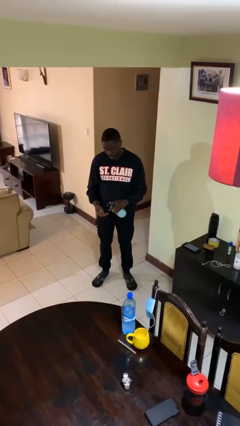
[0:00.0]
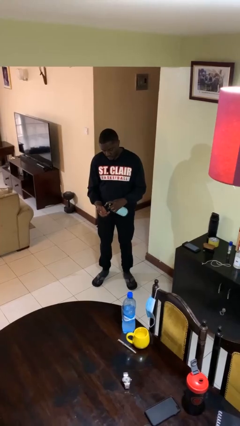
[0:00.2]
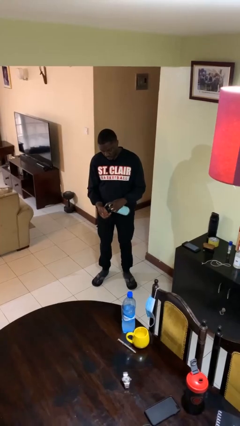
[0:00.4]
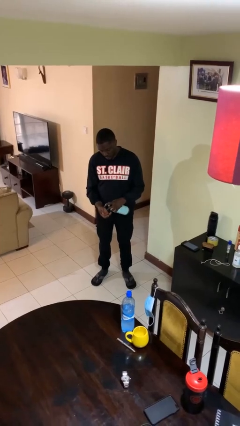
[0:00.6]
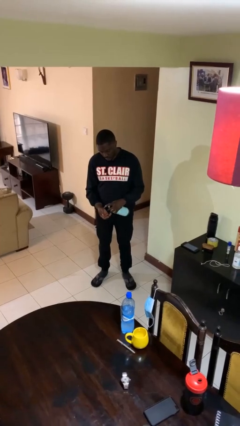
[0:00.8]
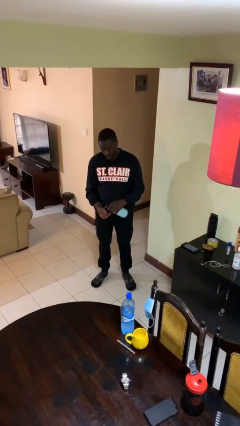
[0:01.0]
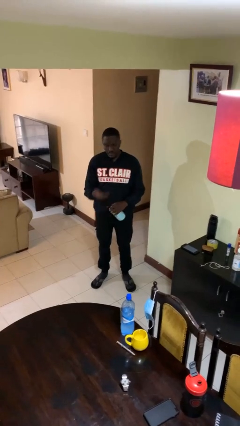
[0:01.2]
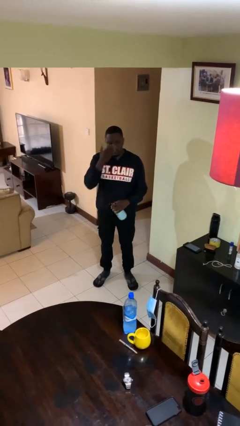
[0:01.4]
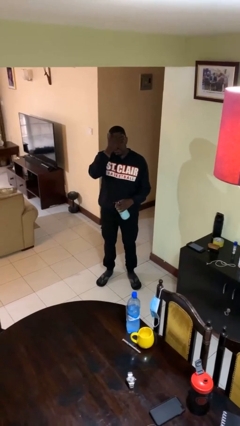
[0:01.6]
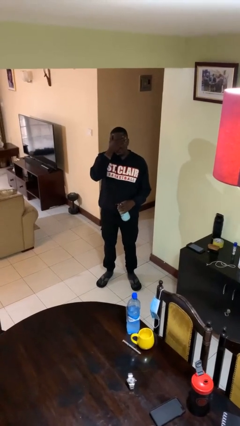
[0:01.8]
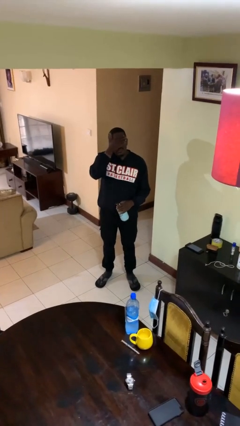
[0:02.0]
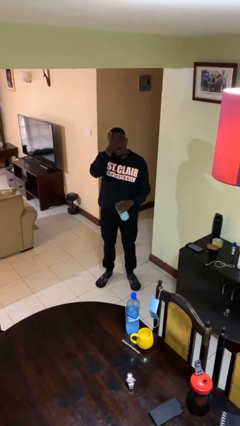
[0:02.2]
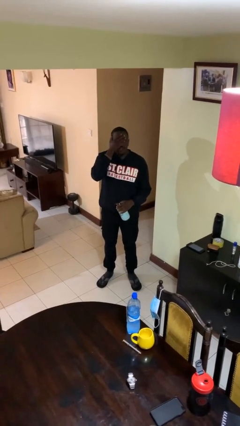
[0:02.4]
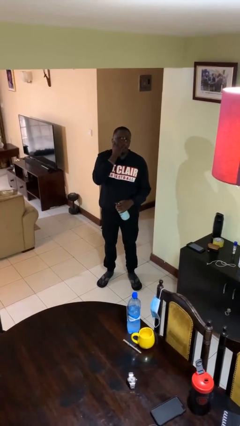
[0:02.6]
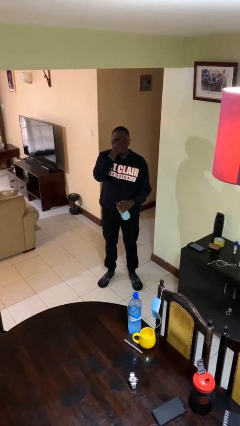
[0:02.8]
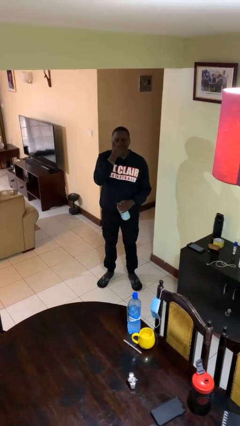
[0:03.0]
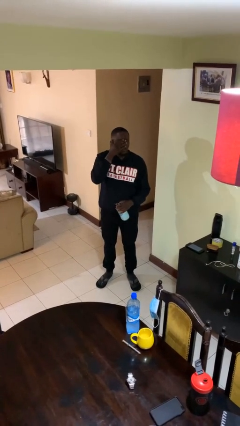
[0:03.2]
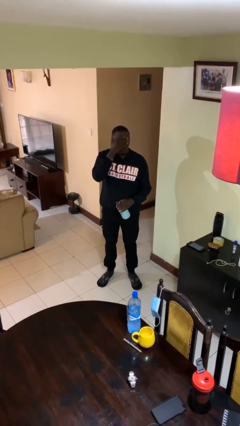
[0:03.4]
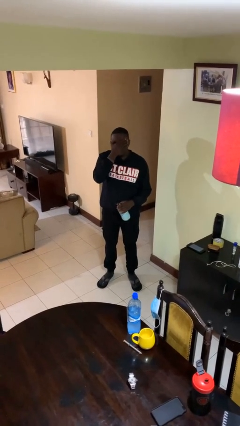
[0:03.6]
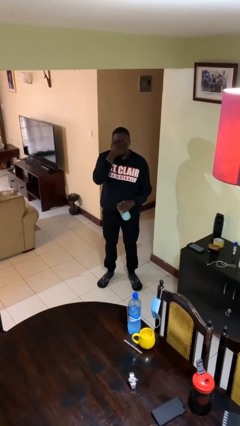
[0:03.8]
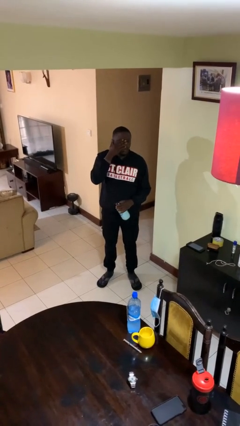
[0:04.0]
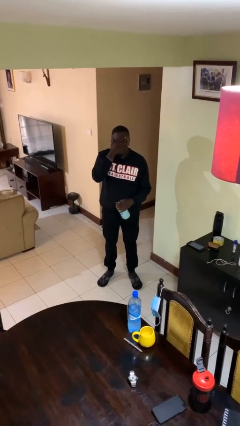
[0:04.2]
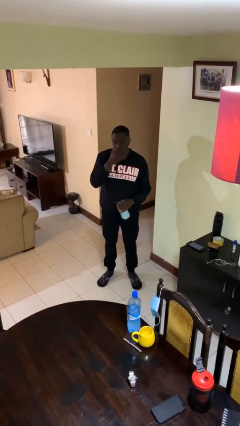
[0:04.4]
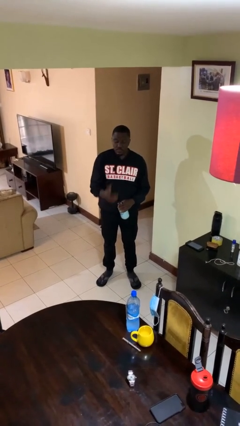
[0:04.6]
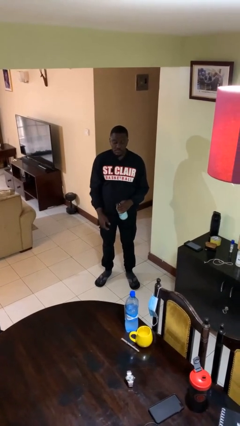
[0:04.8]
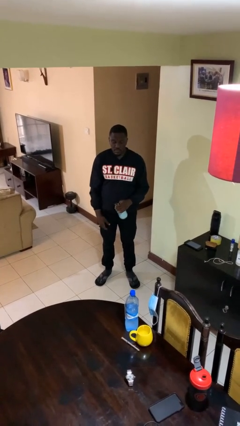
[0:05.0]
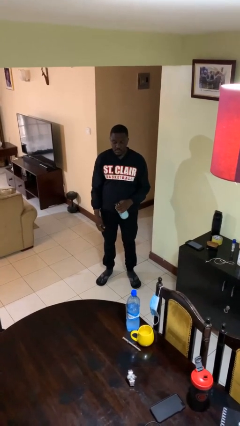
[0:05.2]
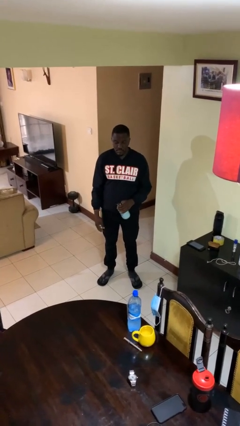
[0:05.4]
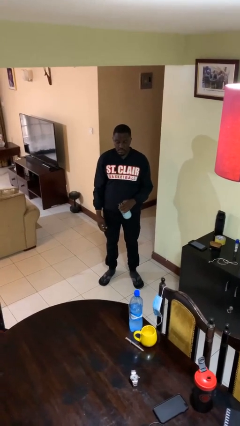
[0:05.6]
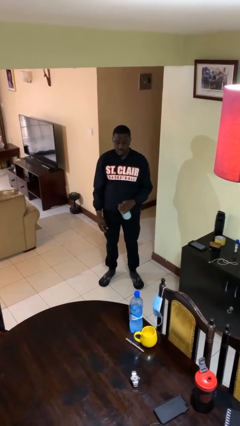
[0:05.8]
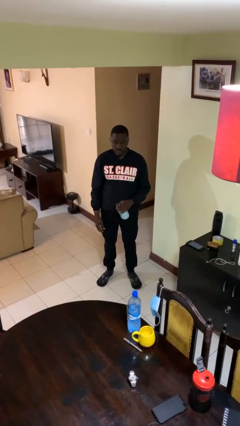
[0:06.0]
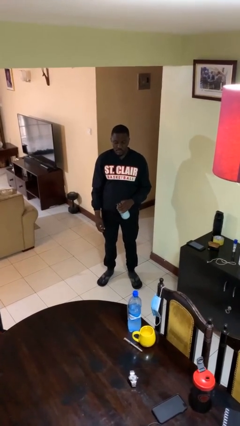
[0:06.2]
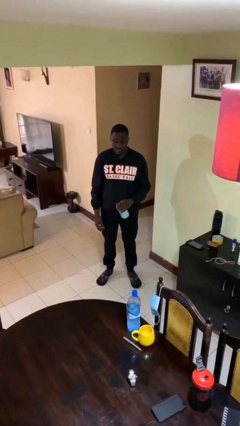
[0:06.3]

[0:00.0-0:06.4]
person applies facial moisturizer

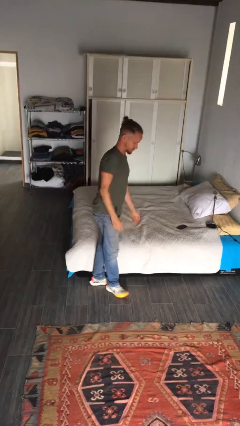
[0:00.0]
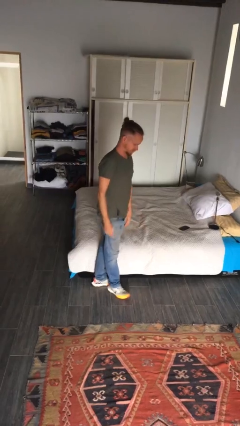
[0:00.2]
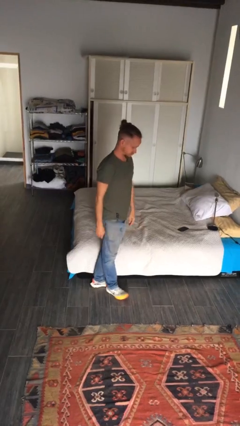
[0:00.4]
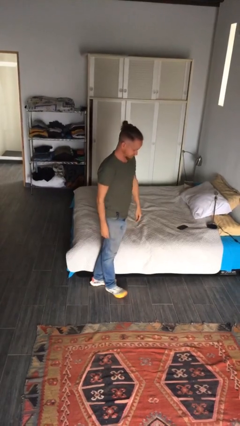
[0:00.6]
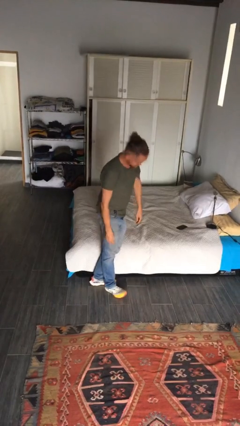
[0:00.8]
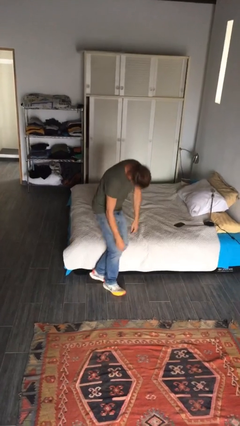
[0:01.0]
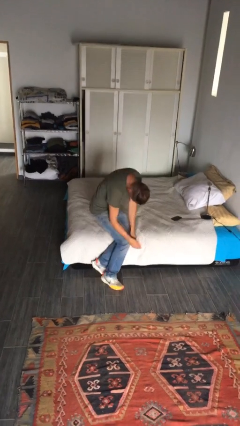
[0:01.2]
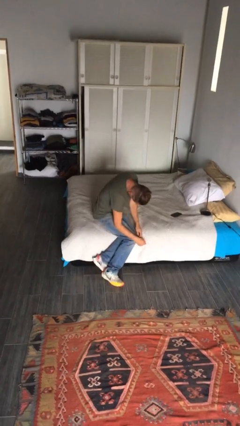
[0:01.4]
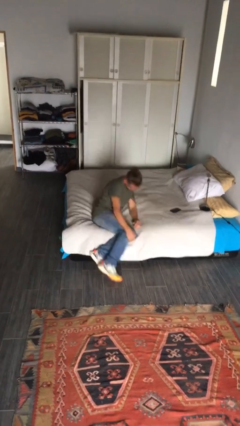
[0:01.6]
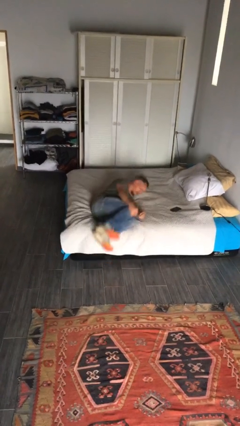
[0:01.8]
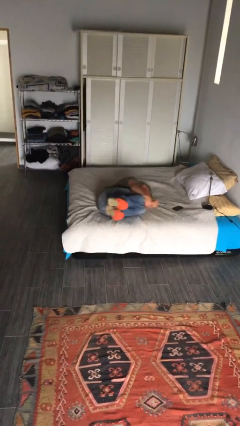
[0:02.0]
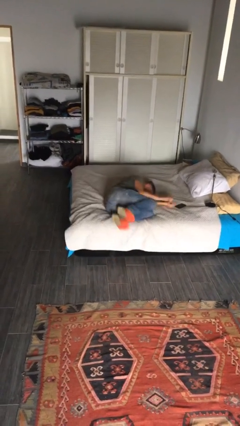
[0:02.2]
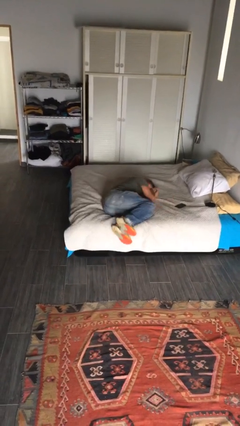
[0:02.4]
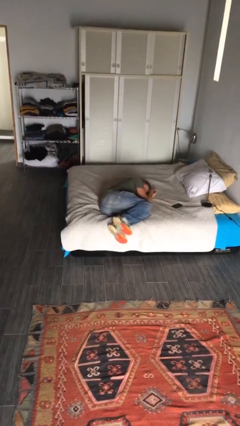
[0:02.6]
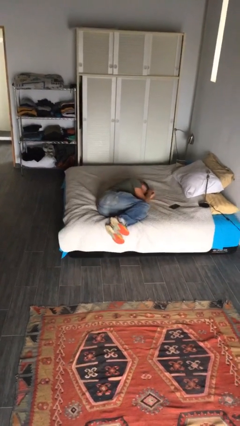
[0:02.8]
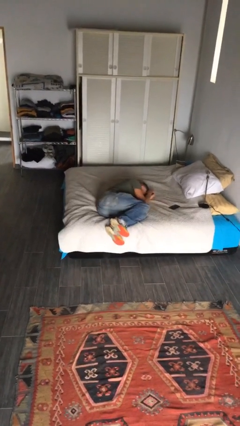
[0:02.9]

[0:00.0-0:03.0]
person lies down on couch

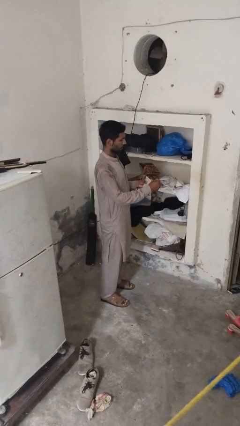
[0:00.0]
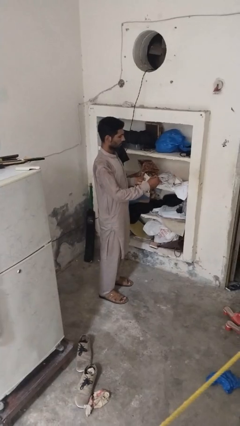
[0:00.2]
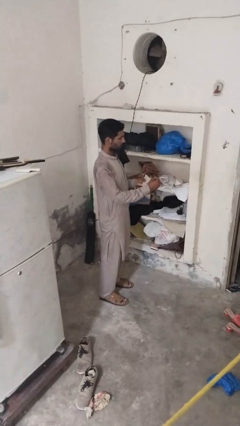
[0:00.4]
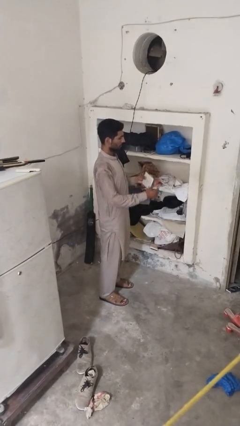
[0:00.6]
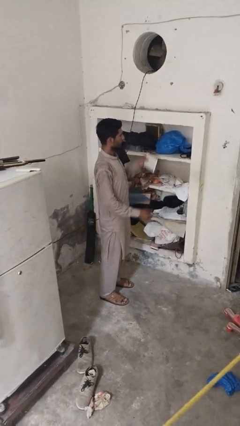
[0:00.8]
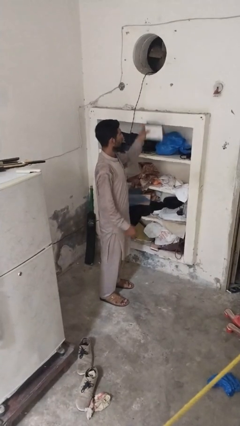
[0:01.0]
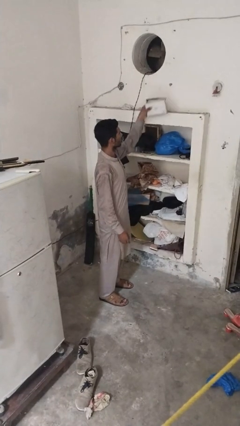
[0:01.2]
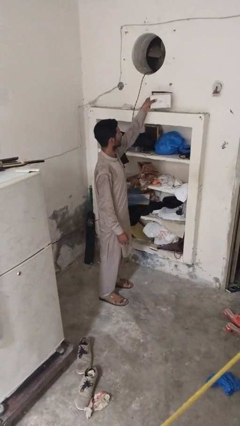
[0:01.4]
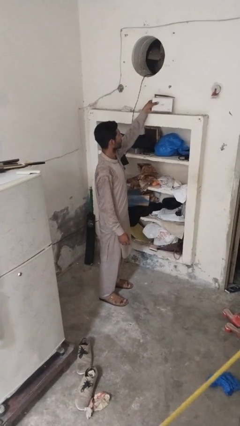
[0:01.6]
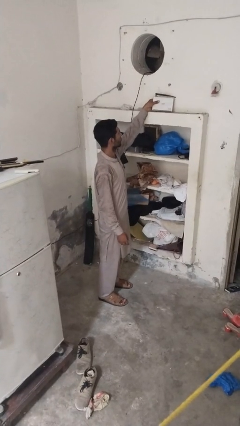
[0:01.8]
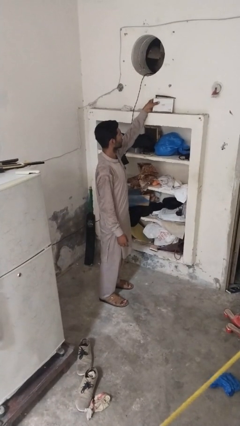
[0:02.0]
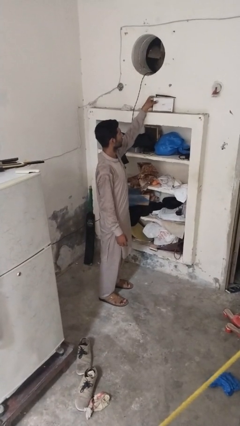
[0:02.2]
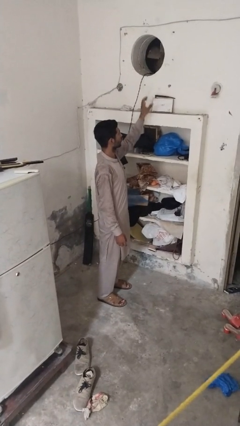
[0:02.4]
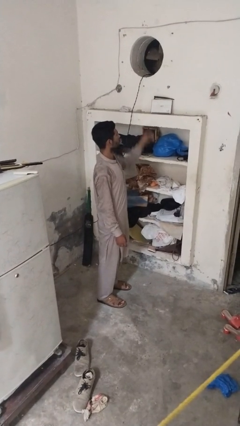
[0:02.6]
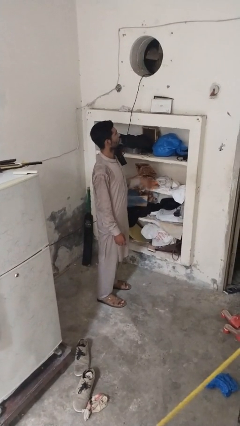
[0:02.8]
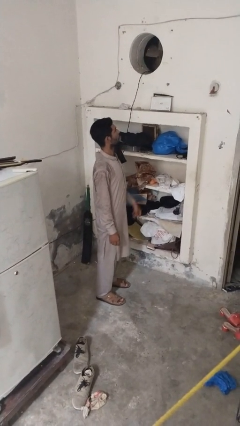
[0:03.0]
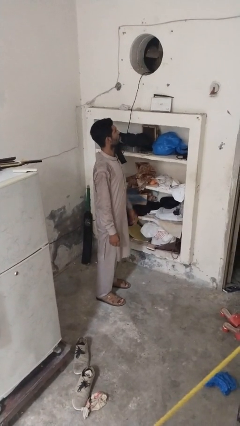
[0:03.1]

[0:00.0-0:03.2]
person puts down object on shelf

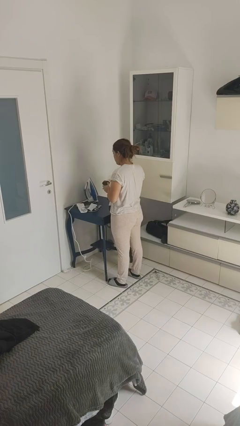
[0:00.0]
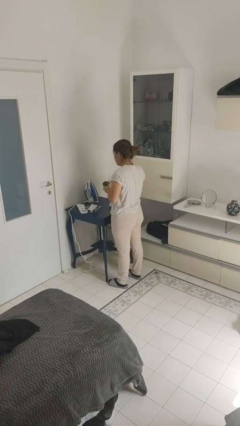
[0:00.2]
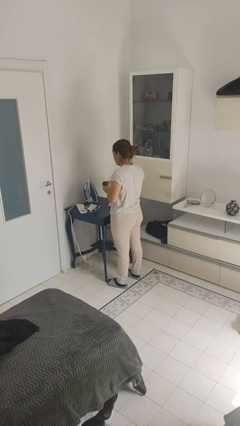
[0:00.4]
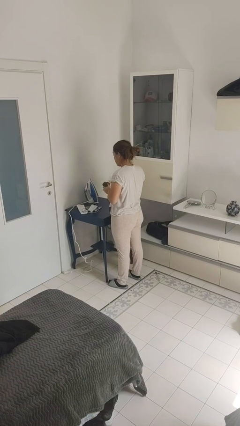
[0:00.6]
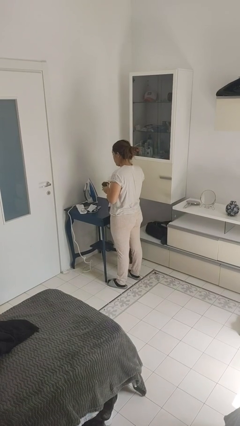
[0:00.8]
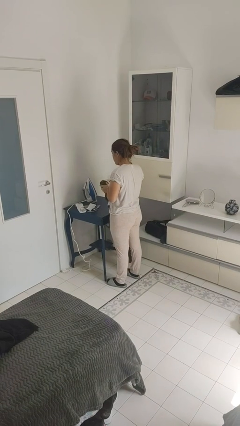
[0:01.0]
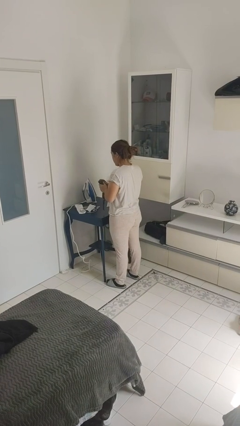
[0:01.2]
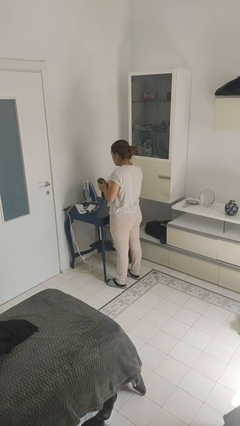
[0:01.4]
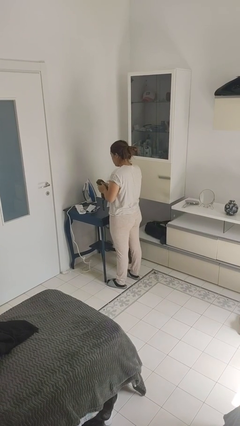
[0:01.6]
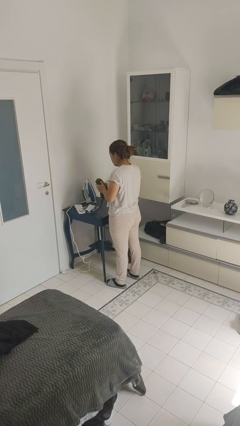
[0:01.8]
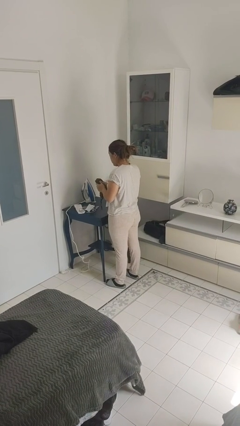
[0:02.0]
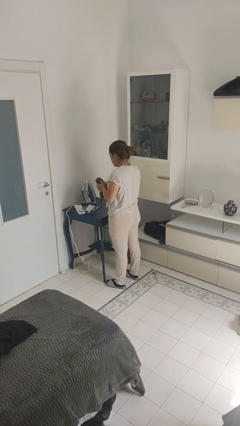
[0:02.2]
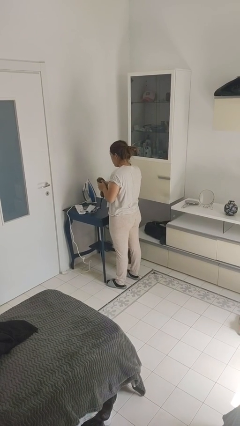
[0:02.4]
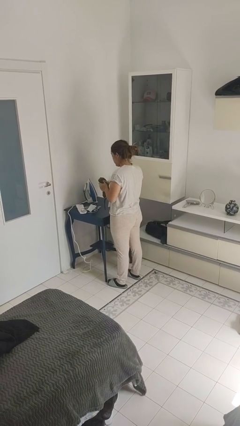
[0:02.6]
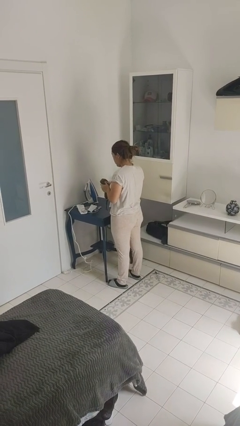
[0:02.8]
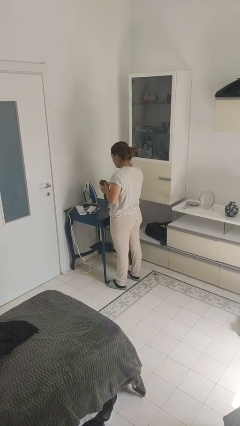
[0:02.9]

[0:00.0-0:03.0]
person squeezes object

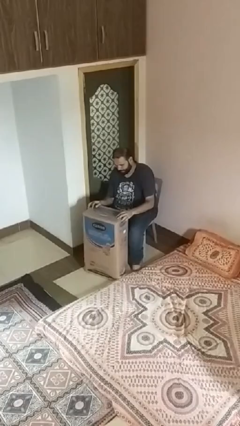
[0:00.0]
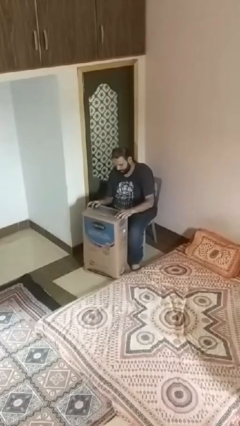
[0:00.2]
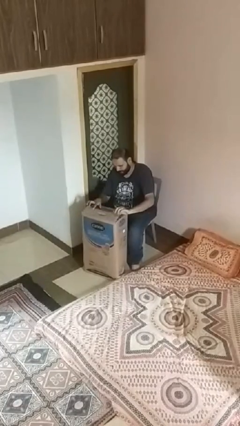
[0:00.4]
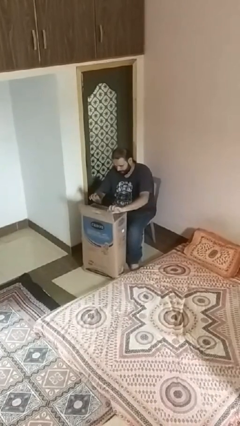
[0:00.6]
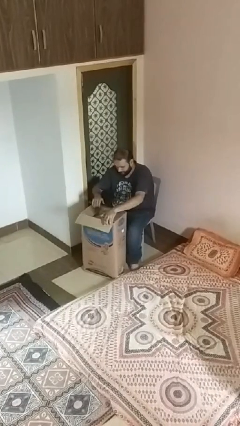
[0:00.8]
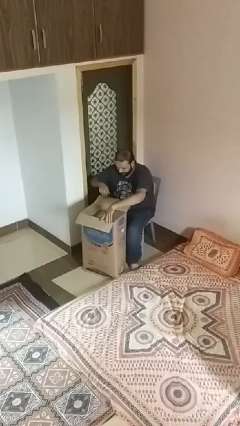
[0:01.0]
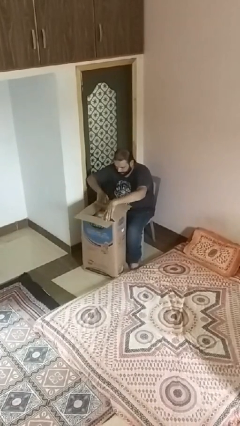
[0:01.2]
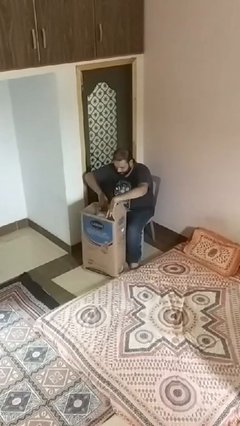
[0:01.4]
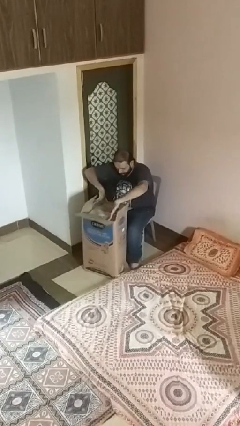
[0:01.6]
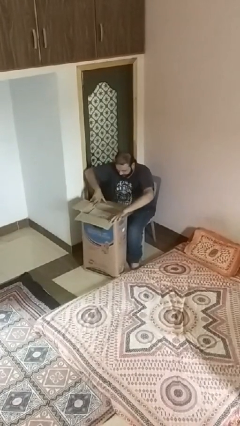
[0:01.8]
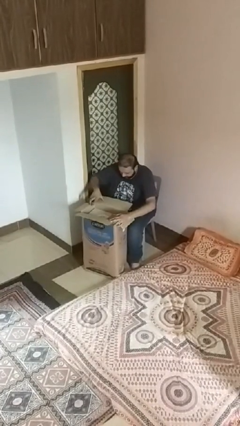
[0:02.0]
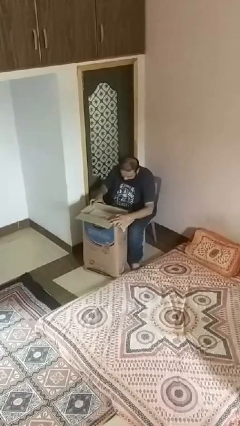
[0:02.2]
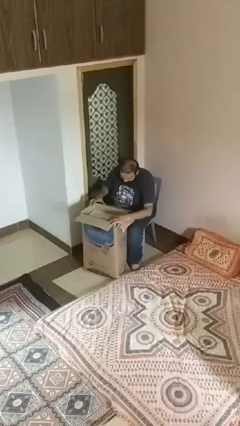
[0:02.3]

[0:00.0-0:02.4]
person searches in box
